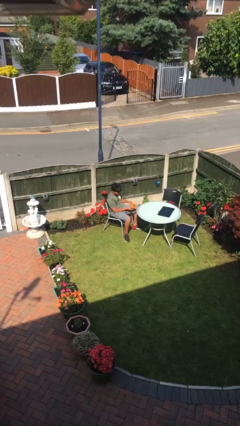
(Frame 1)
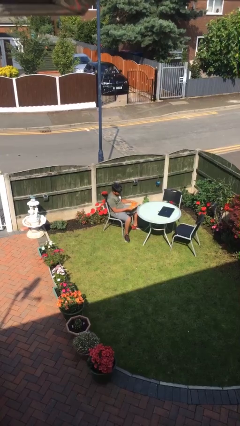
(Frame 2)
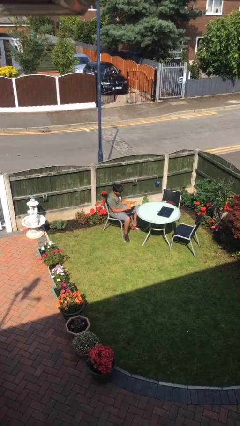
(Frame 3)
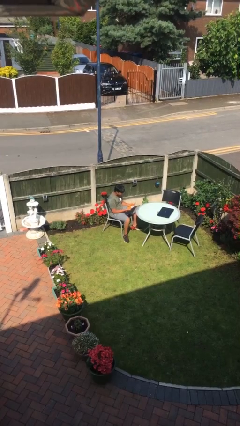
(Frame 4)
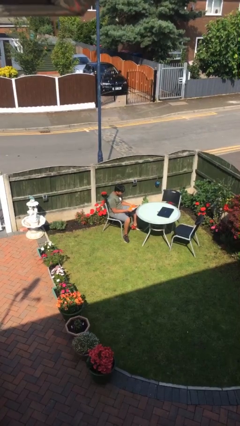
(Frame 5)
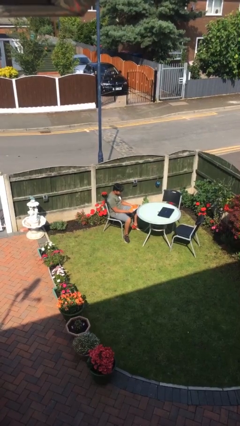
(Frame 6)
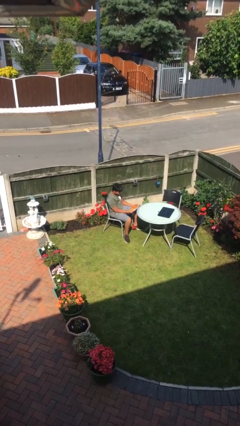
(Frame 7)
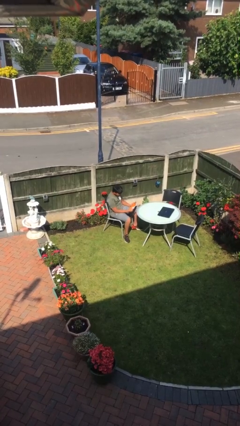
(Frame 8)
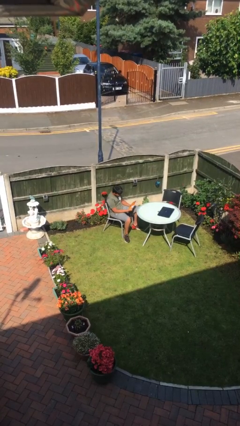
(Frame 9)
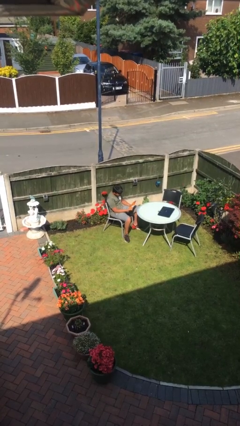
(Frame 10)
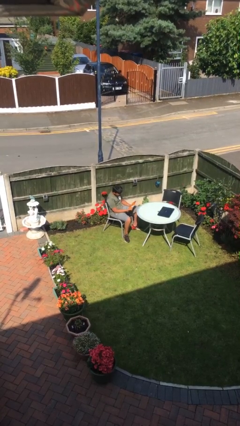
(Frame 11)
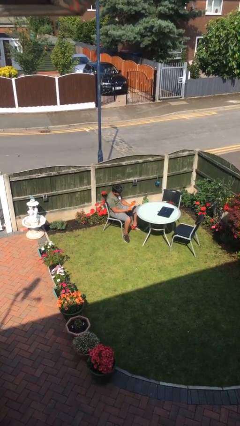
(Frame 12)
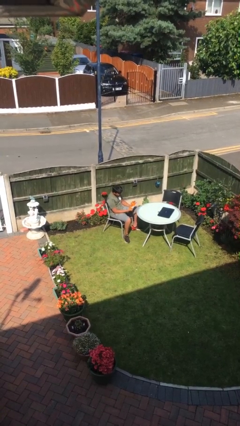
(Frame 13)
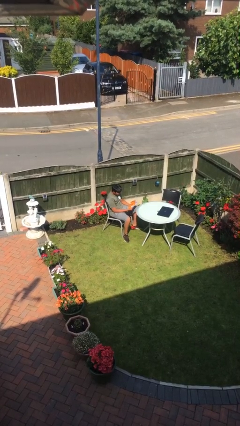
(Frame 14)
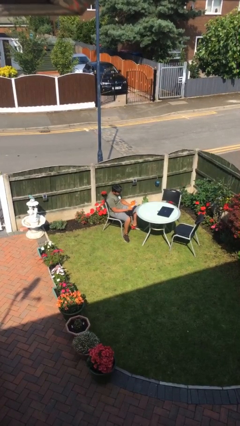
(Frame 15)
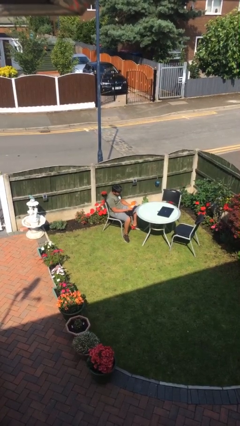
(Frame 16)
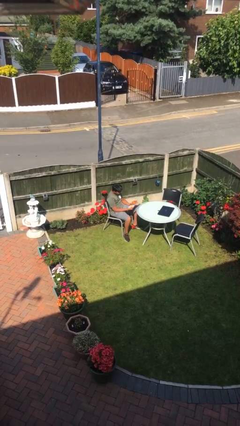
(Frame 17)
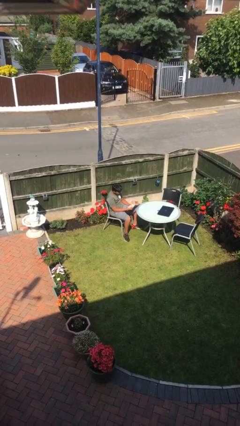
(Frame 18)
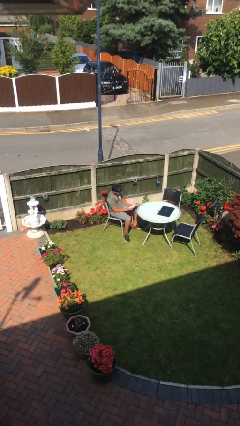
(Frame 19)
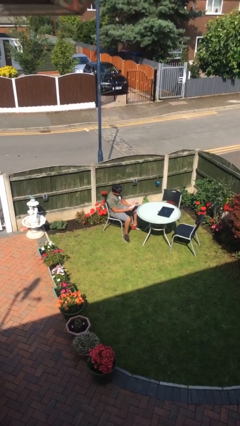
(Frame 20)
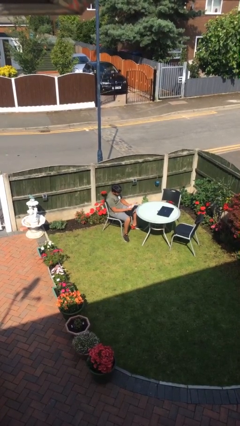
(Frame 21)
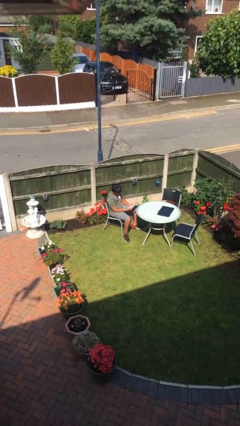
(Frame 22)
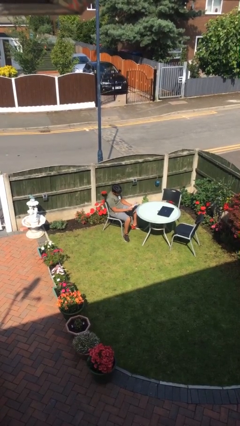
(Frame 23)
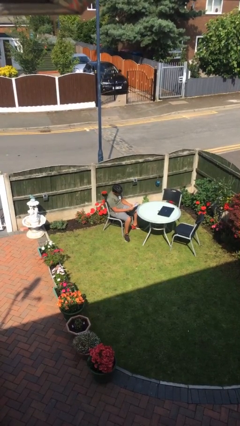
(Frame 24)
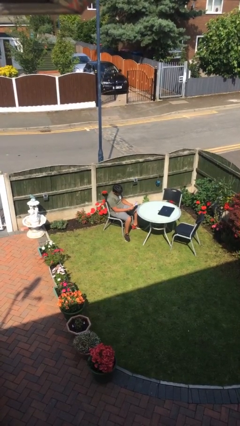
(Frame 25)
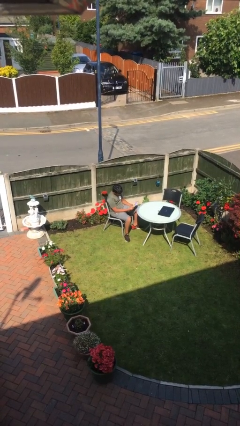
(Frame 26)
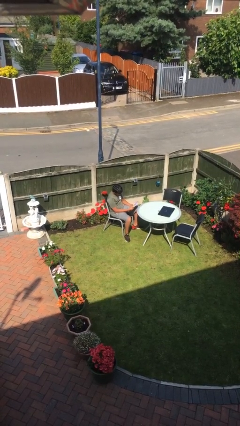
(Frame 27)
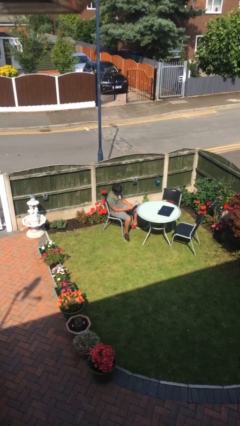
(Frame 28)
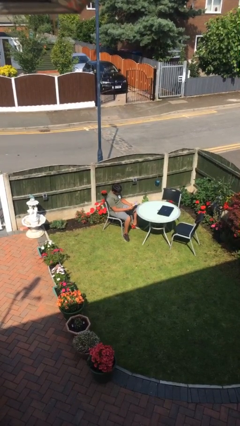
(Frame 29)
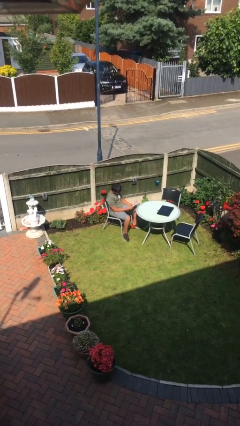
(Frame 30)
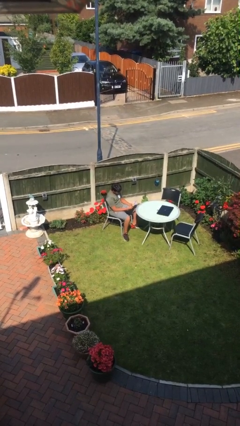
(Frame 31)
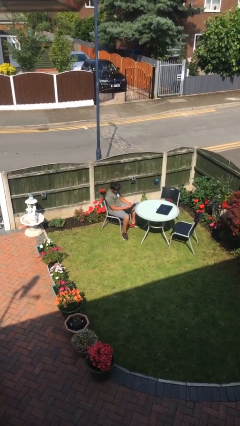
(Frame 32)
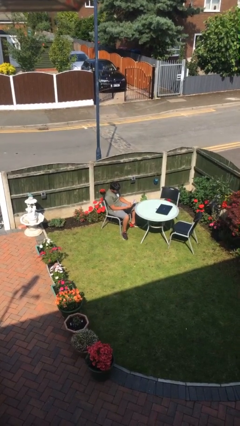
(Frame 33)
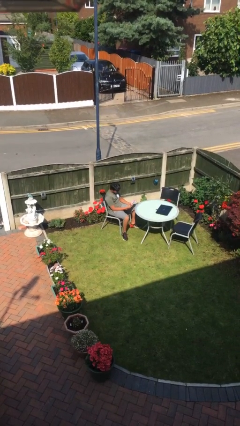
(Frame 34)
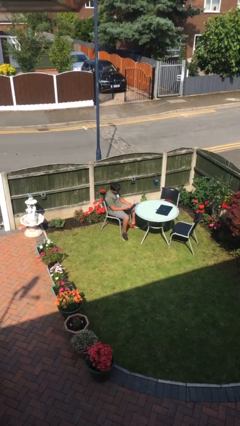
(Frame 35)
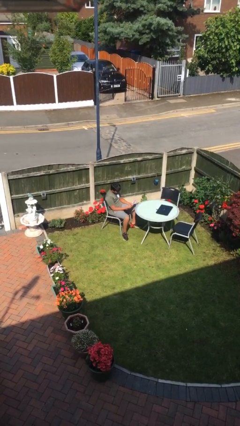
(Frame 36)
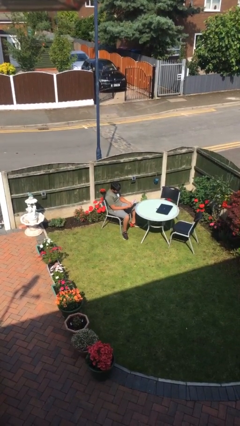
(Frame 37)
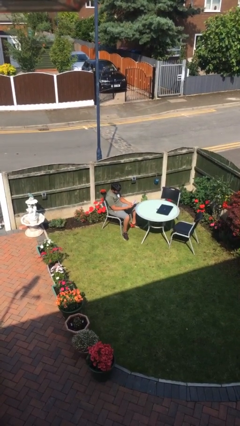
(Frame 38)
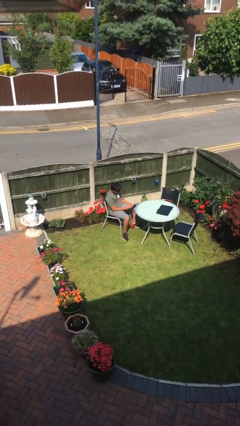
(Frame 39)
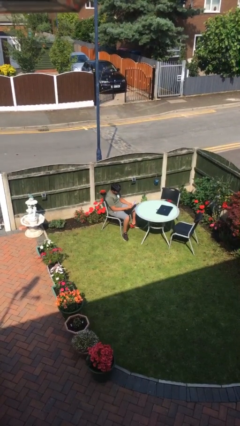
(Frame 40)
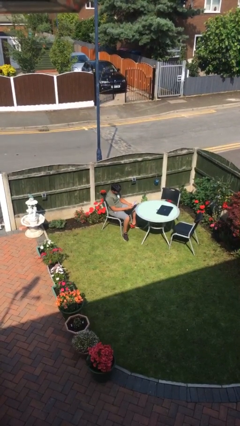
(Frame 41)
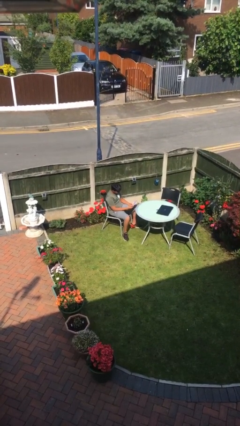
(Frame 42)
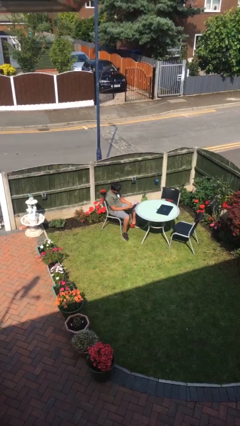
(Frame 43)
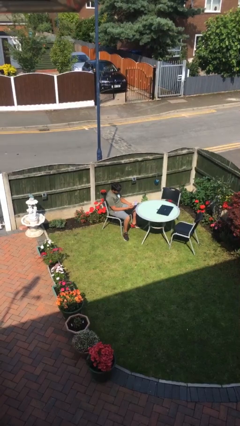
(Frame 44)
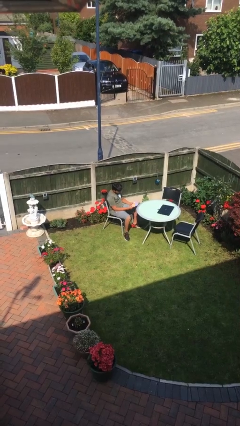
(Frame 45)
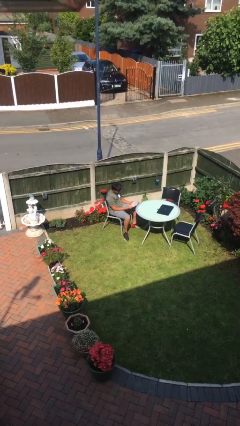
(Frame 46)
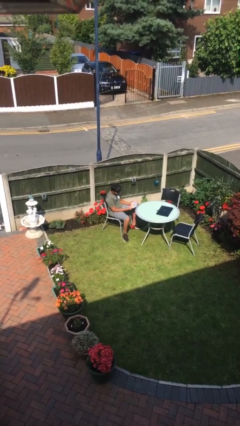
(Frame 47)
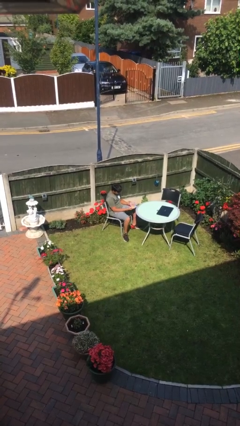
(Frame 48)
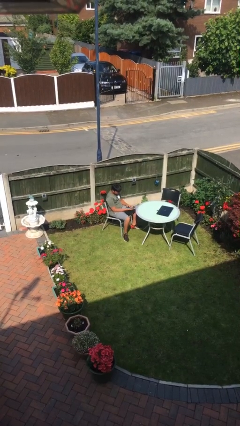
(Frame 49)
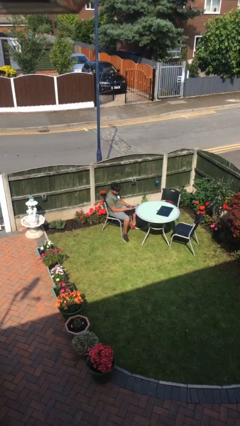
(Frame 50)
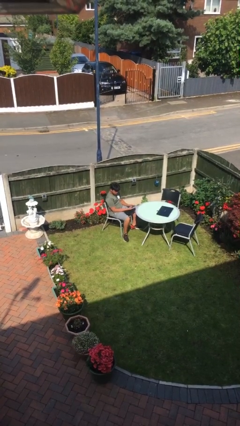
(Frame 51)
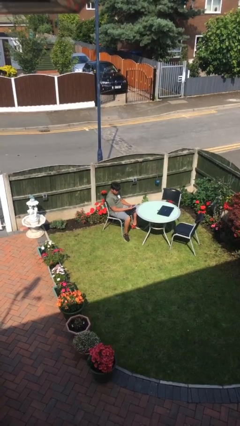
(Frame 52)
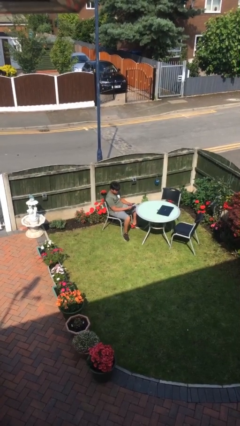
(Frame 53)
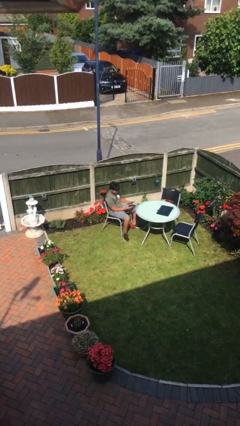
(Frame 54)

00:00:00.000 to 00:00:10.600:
person reads document

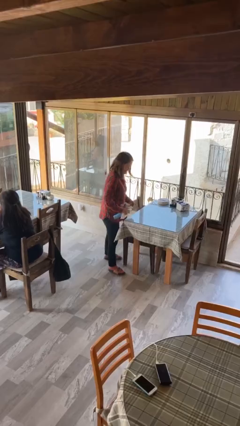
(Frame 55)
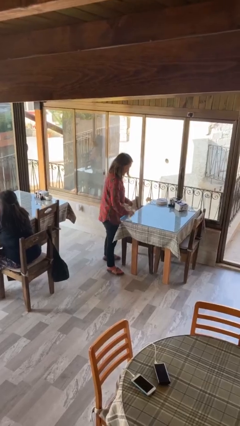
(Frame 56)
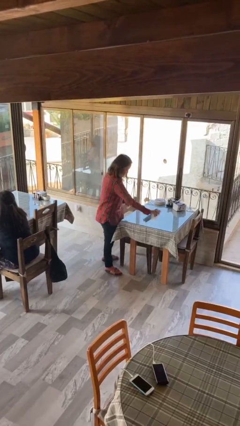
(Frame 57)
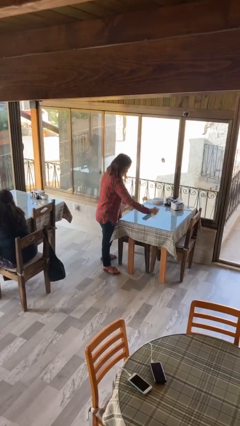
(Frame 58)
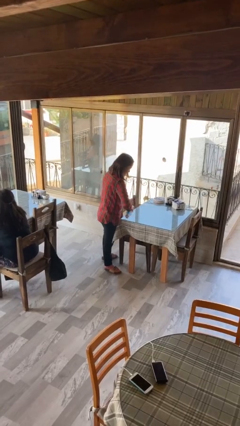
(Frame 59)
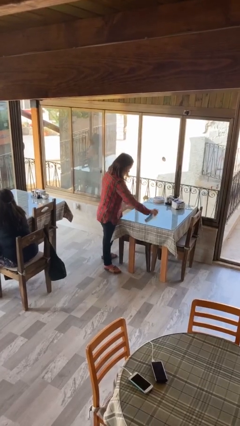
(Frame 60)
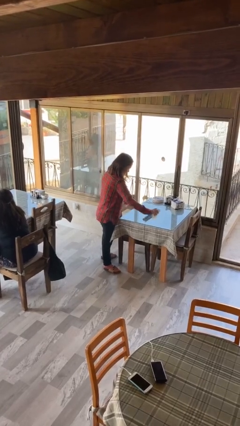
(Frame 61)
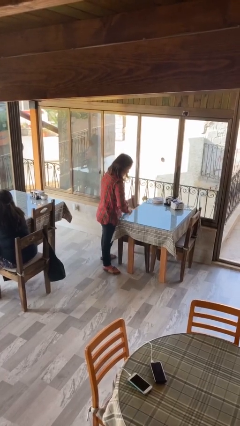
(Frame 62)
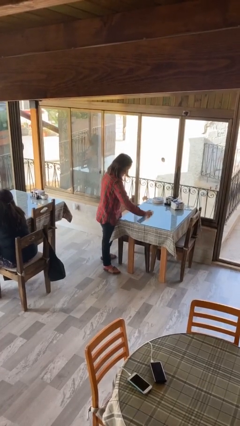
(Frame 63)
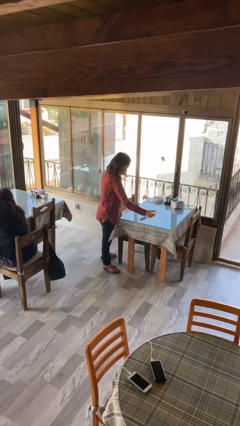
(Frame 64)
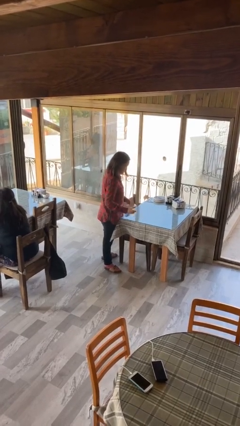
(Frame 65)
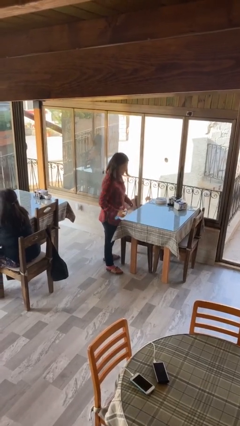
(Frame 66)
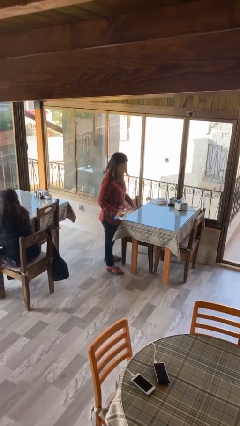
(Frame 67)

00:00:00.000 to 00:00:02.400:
person sprays from bottle

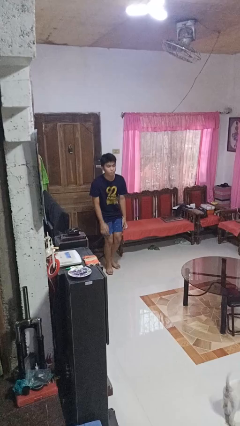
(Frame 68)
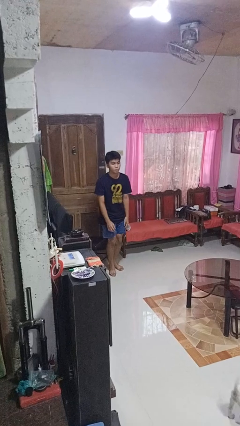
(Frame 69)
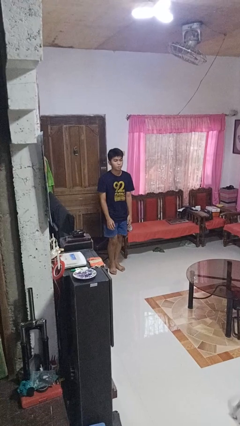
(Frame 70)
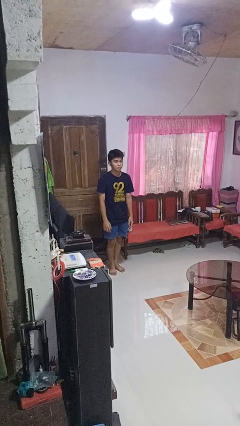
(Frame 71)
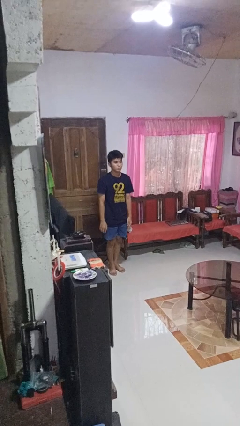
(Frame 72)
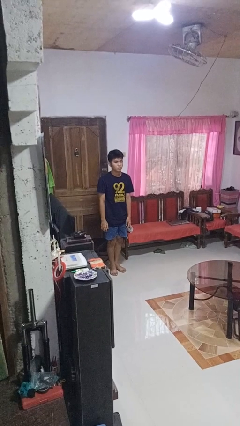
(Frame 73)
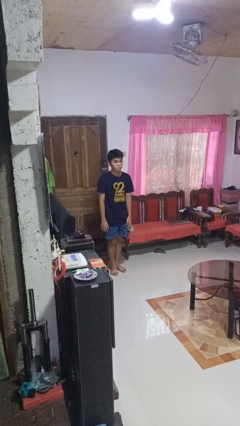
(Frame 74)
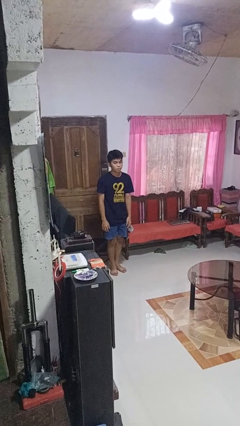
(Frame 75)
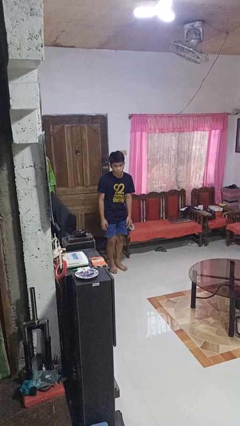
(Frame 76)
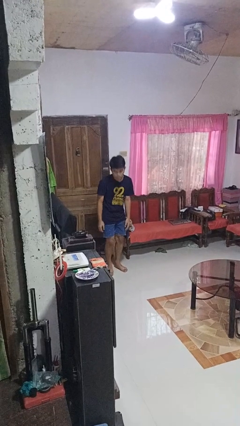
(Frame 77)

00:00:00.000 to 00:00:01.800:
person stands up from floor

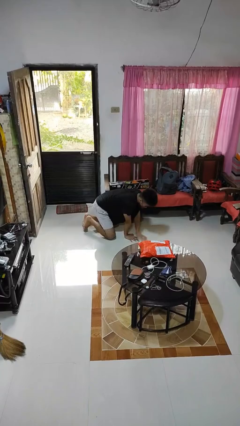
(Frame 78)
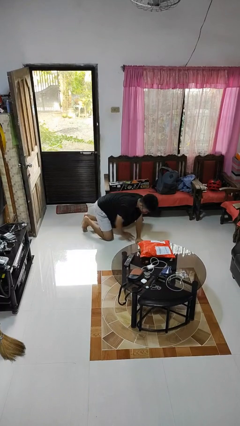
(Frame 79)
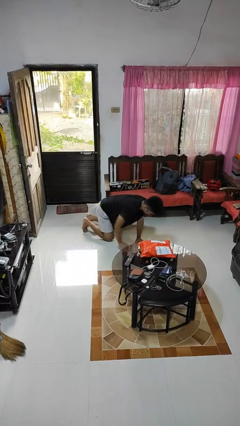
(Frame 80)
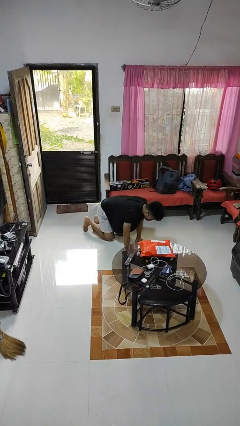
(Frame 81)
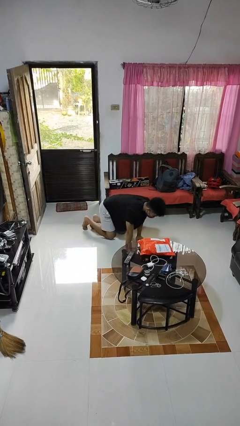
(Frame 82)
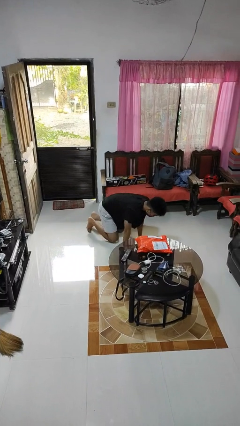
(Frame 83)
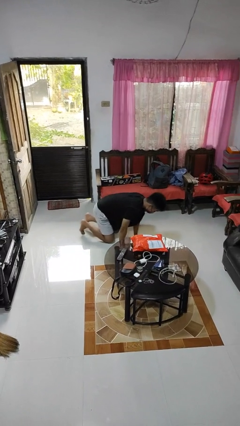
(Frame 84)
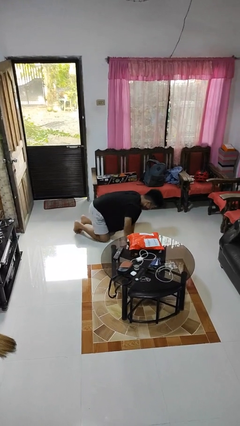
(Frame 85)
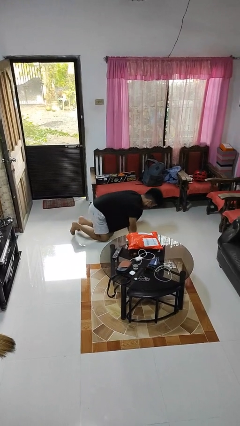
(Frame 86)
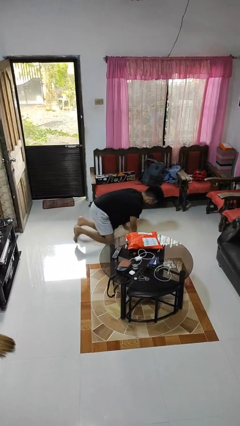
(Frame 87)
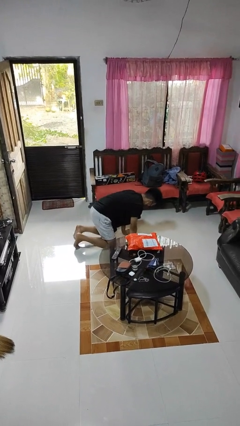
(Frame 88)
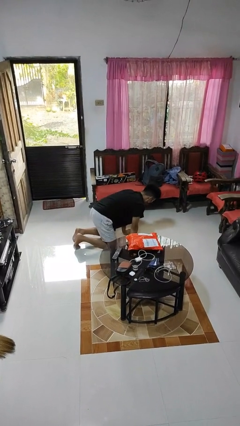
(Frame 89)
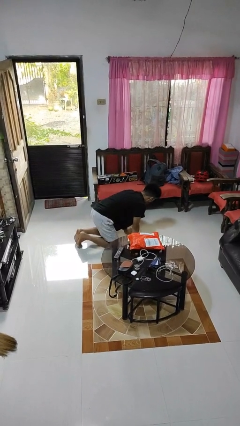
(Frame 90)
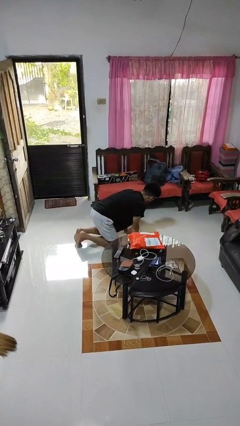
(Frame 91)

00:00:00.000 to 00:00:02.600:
person crawls

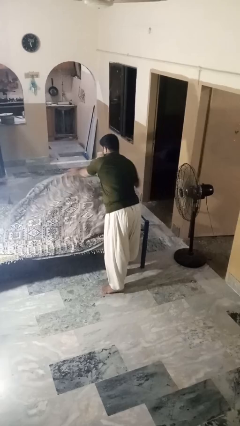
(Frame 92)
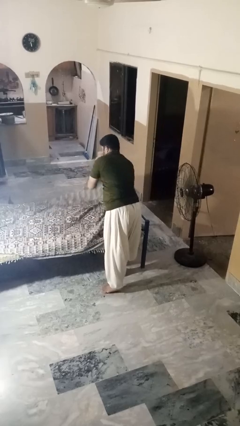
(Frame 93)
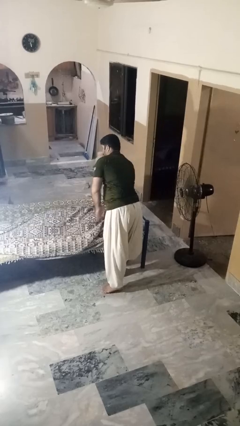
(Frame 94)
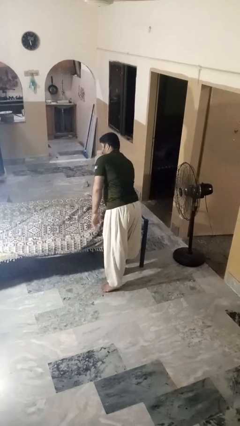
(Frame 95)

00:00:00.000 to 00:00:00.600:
person uncovers friend with blanket
